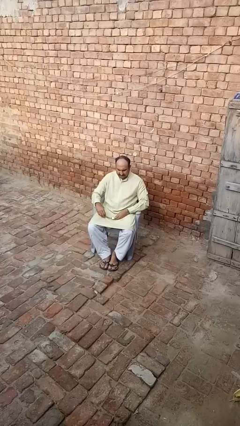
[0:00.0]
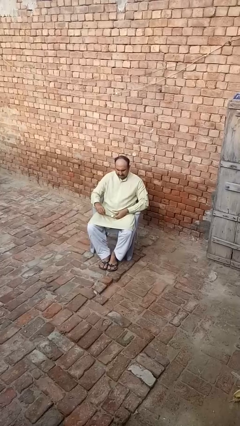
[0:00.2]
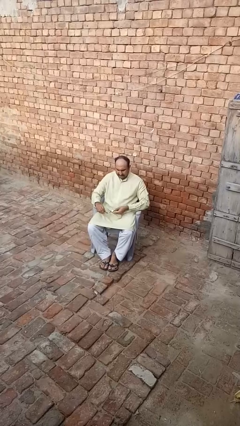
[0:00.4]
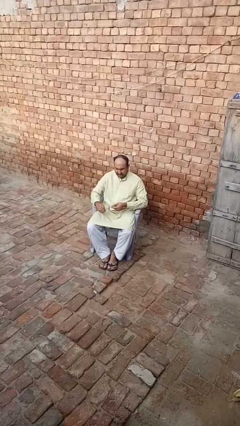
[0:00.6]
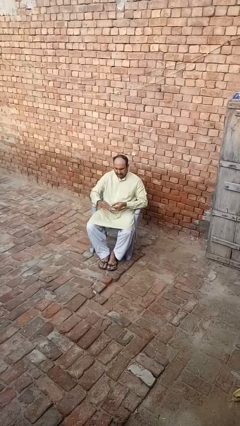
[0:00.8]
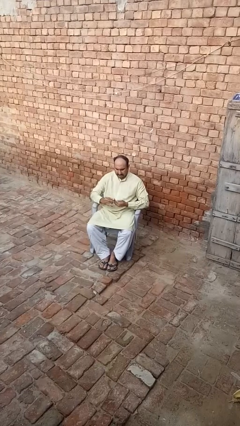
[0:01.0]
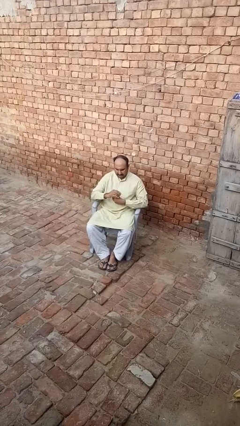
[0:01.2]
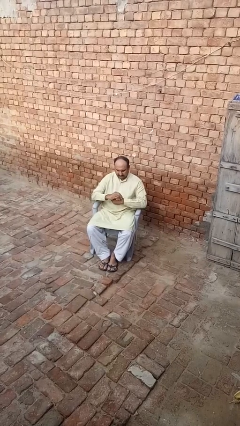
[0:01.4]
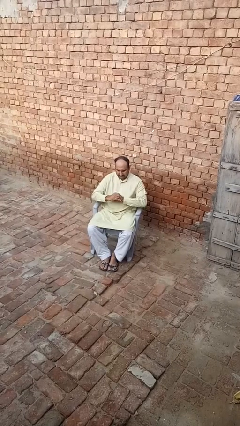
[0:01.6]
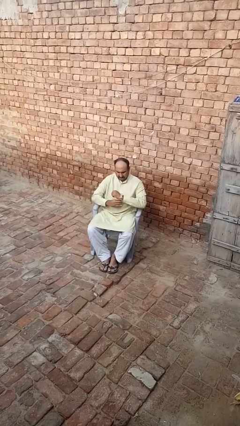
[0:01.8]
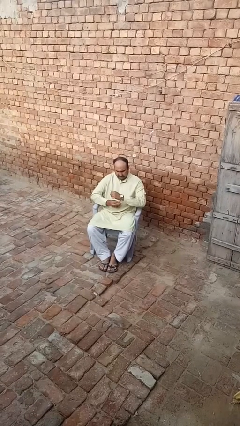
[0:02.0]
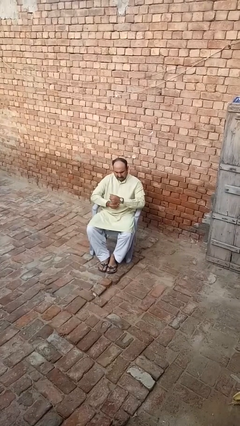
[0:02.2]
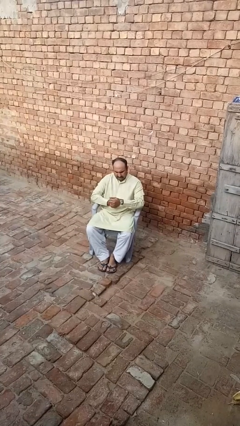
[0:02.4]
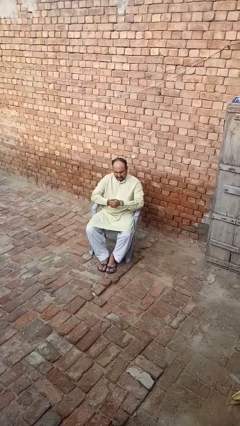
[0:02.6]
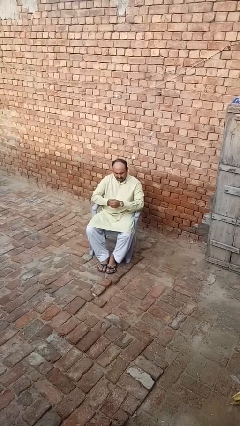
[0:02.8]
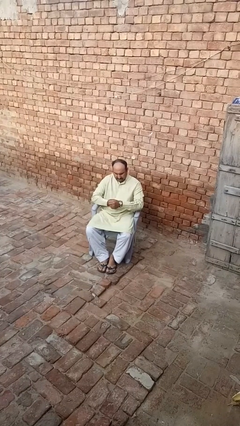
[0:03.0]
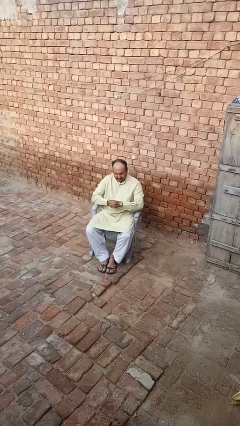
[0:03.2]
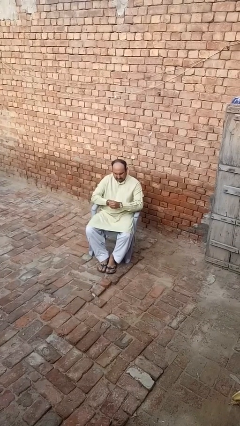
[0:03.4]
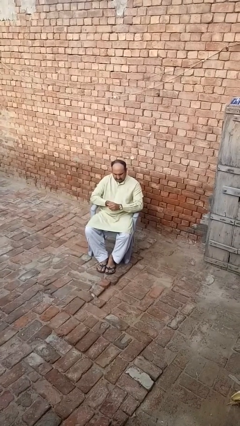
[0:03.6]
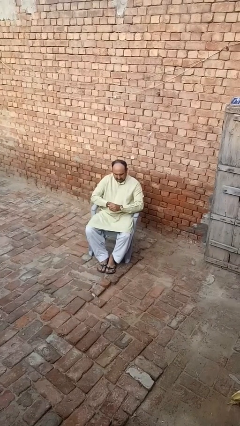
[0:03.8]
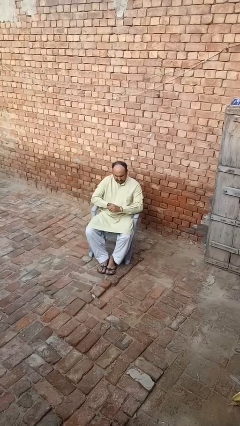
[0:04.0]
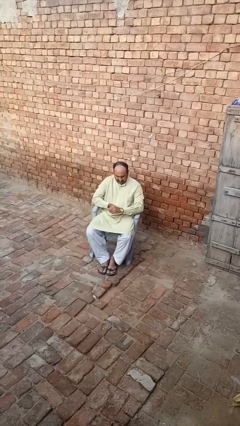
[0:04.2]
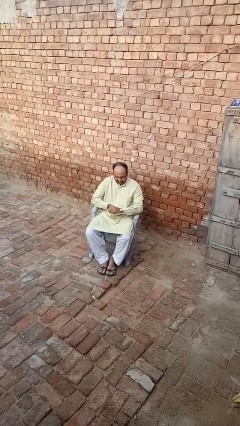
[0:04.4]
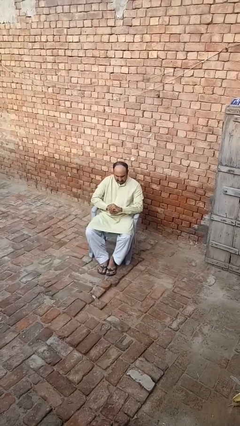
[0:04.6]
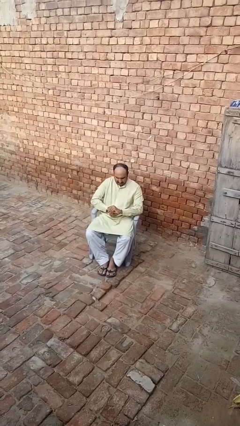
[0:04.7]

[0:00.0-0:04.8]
person puts on wristwatch

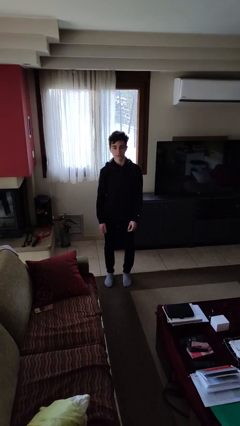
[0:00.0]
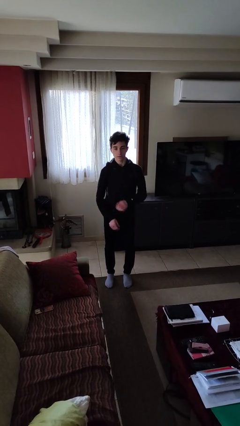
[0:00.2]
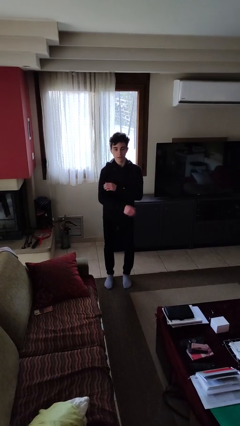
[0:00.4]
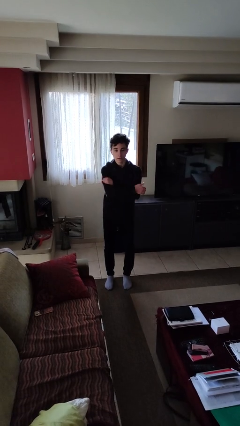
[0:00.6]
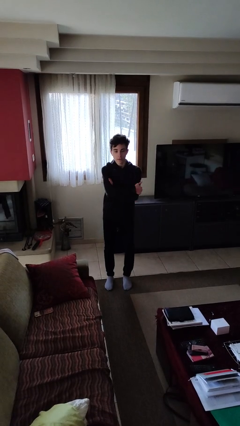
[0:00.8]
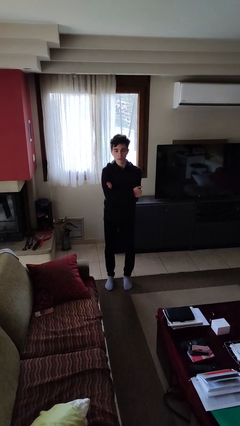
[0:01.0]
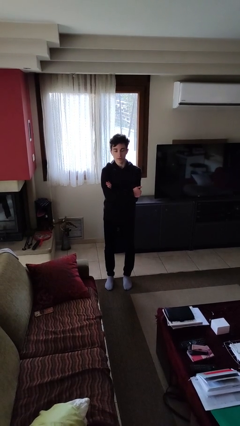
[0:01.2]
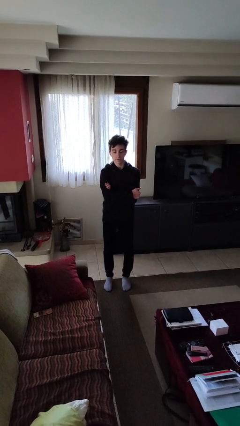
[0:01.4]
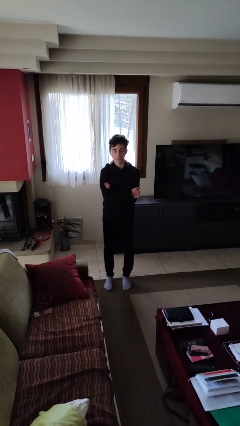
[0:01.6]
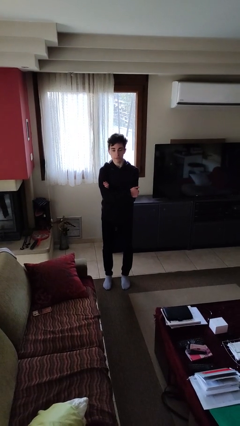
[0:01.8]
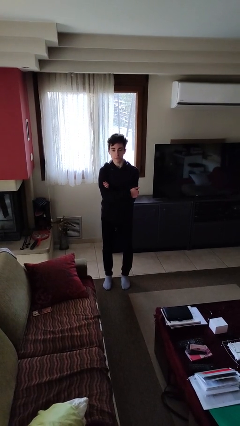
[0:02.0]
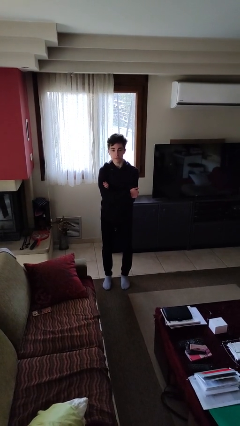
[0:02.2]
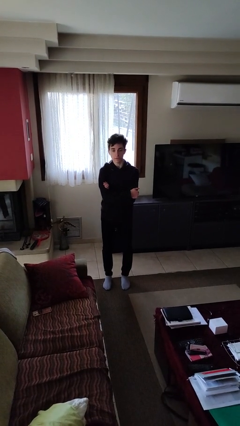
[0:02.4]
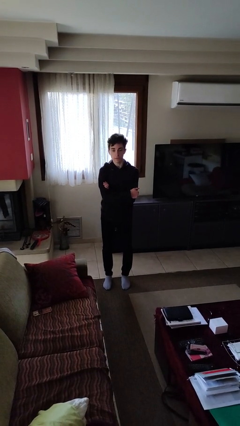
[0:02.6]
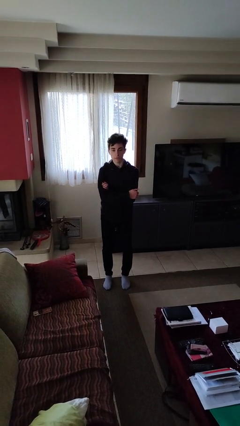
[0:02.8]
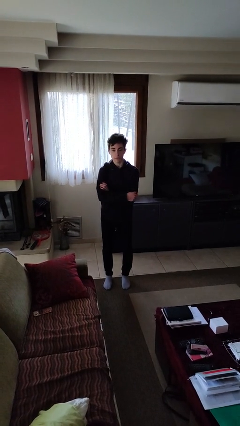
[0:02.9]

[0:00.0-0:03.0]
person crosses arms

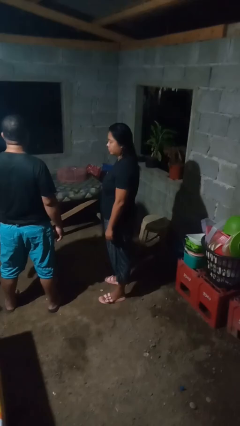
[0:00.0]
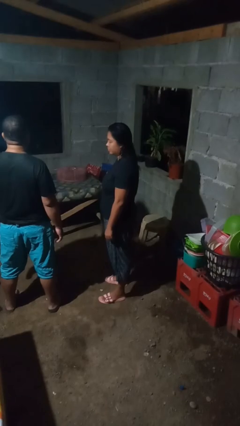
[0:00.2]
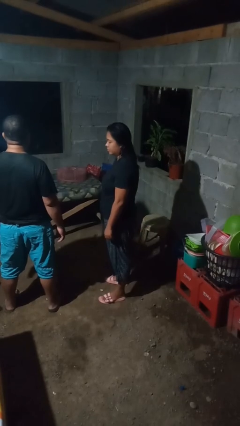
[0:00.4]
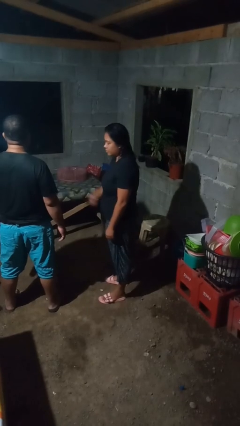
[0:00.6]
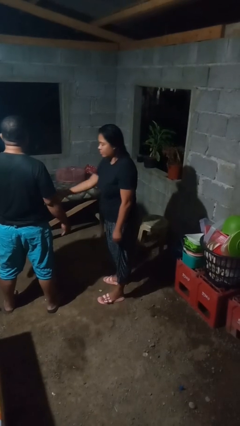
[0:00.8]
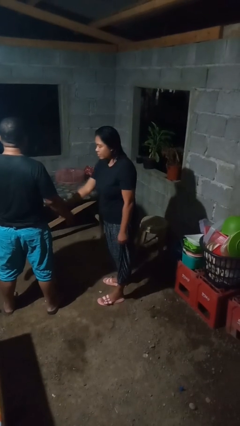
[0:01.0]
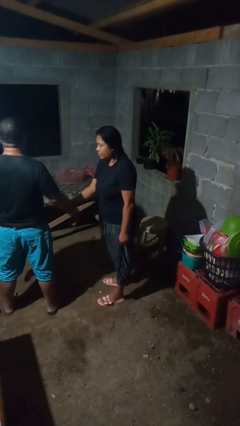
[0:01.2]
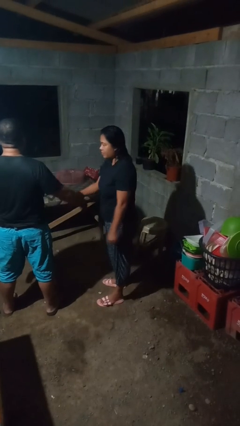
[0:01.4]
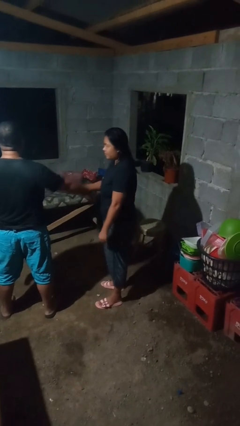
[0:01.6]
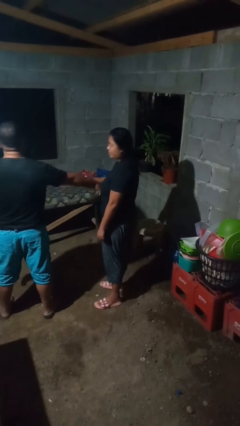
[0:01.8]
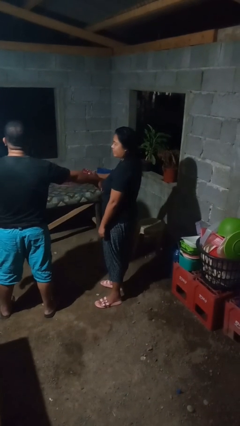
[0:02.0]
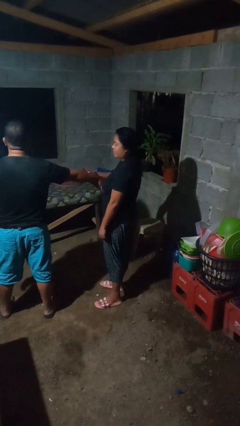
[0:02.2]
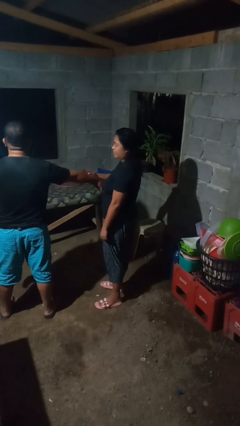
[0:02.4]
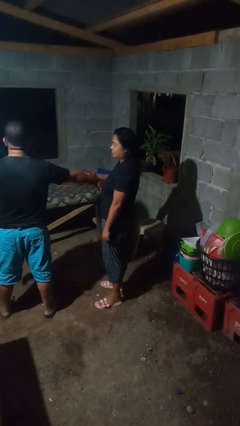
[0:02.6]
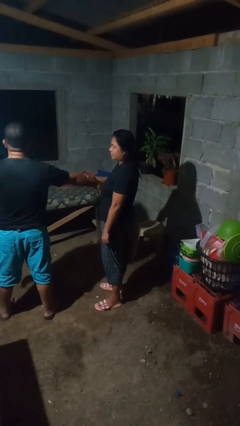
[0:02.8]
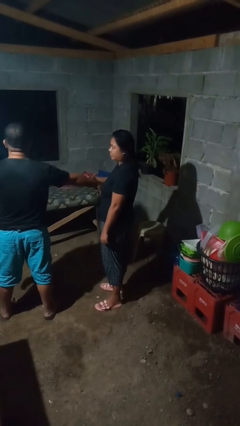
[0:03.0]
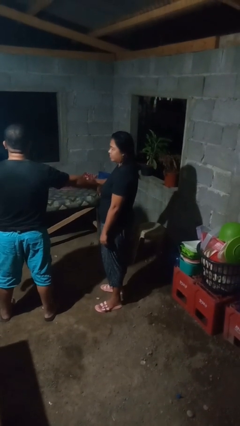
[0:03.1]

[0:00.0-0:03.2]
person grabs person by forearm

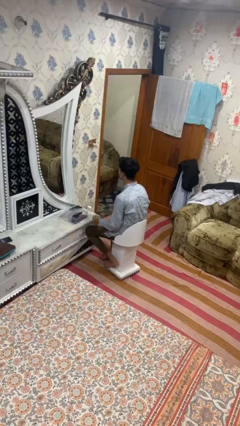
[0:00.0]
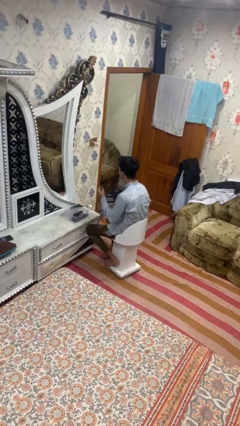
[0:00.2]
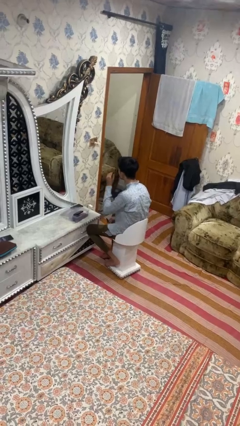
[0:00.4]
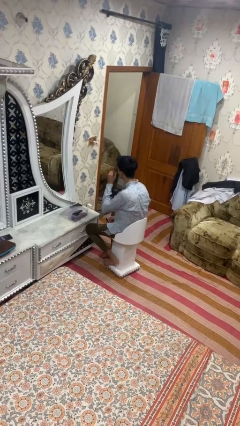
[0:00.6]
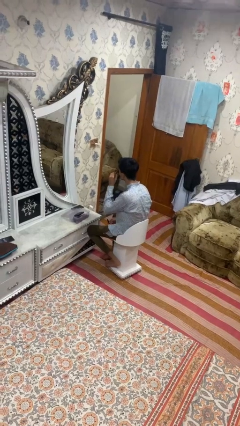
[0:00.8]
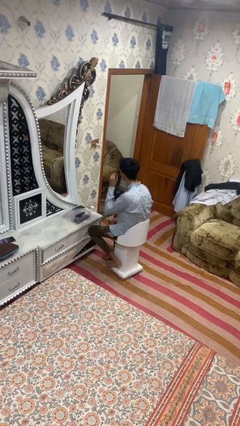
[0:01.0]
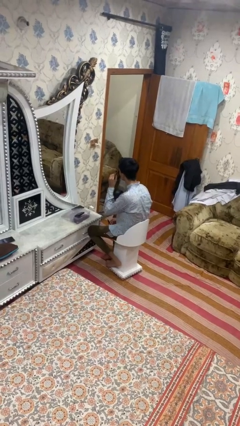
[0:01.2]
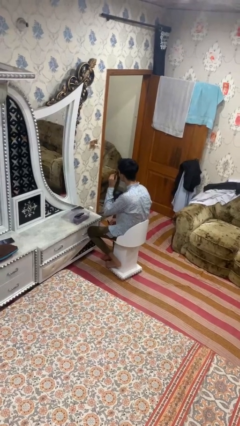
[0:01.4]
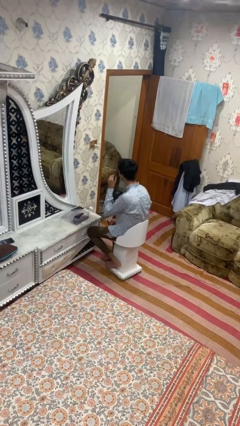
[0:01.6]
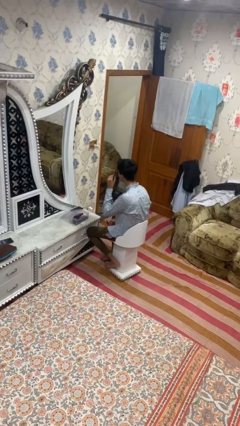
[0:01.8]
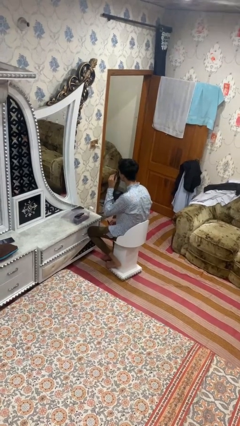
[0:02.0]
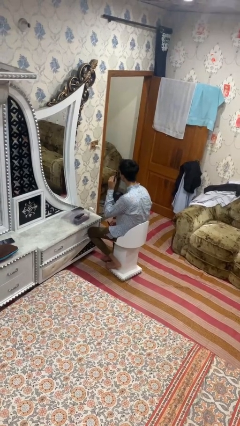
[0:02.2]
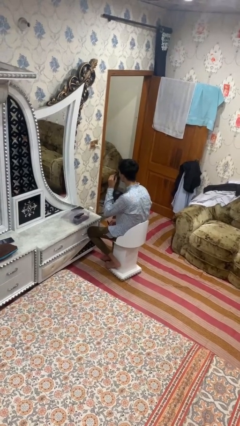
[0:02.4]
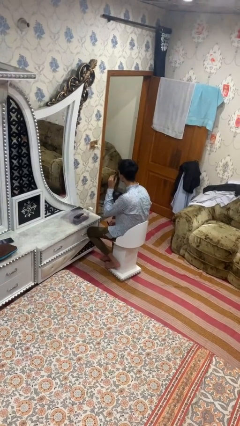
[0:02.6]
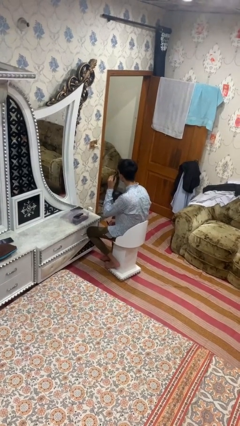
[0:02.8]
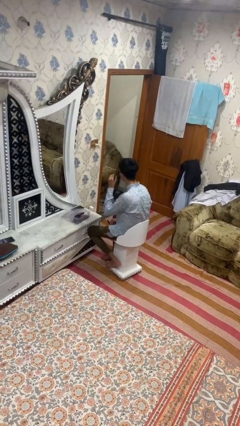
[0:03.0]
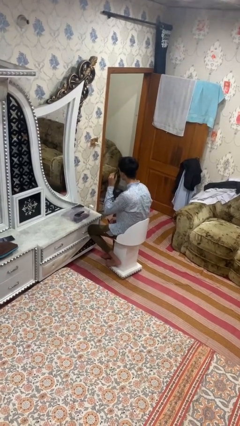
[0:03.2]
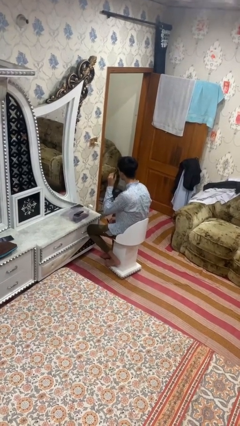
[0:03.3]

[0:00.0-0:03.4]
person applies eye makeup

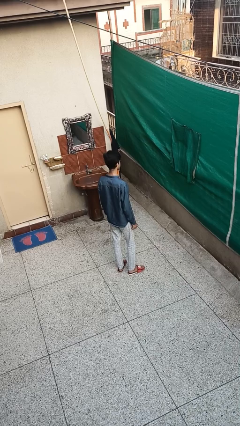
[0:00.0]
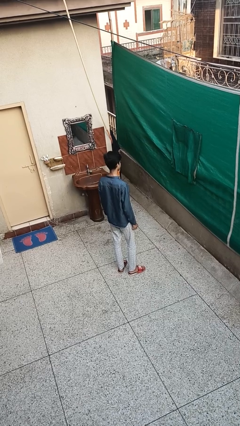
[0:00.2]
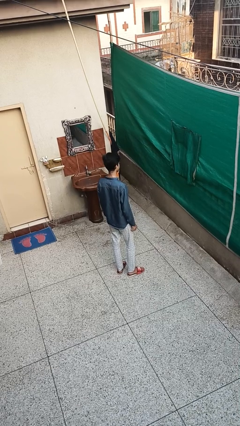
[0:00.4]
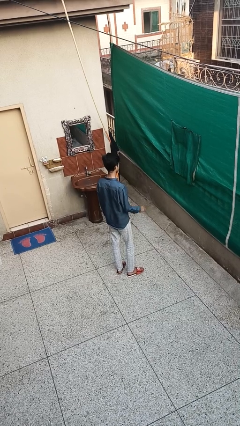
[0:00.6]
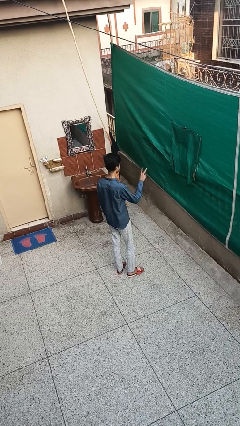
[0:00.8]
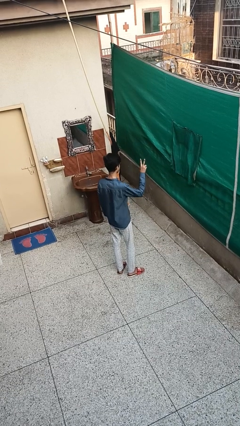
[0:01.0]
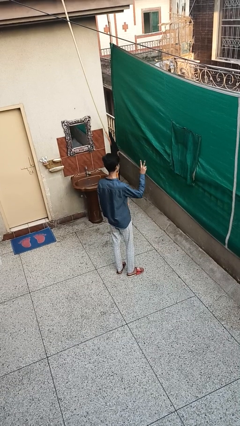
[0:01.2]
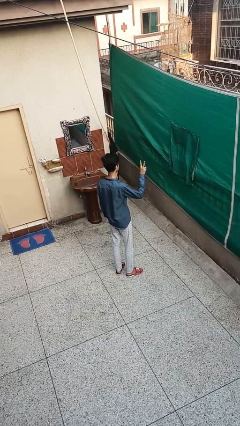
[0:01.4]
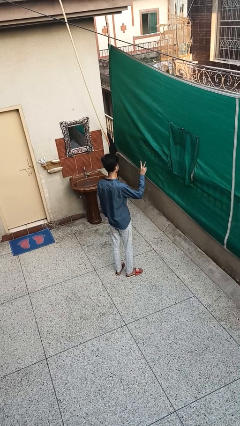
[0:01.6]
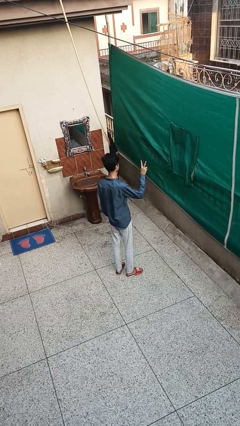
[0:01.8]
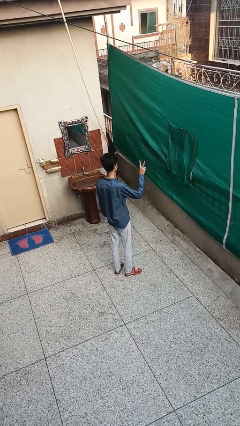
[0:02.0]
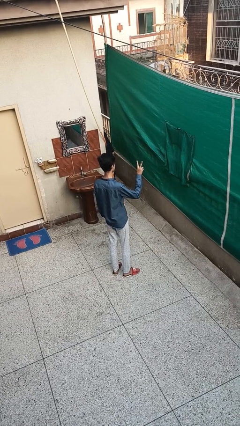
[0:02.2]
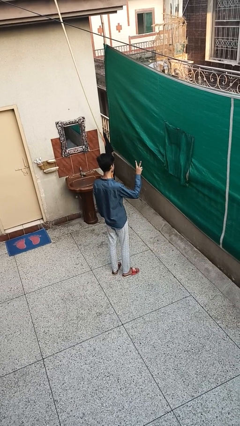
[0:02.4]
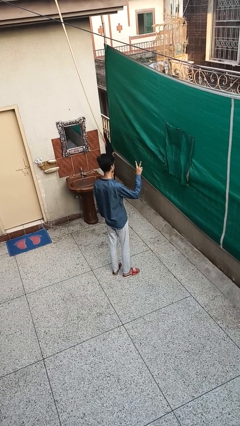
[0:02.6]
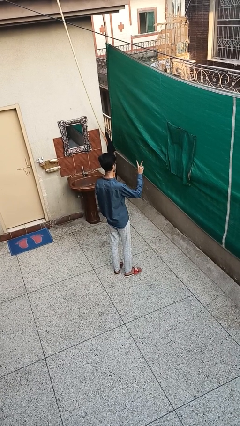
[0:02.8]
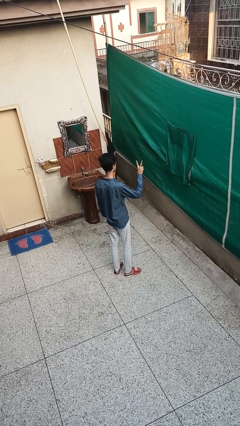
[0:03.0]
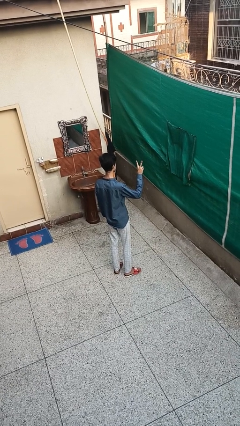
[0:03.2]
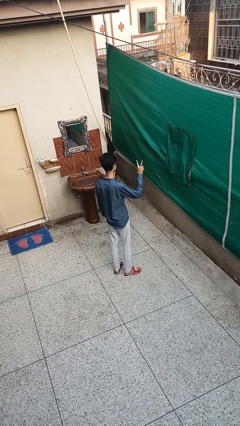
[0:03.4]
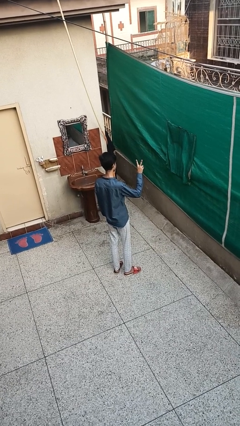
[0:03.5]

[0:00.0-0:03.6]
person gestures peace
